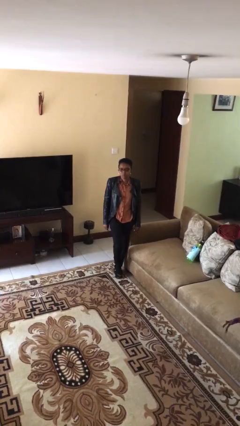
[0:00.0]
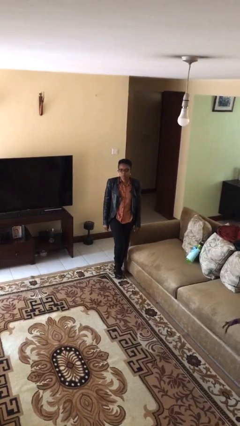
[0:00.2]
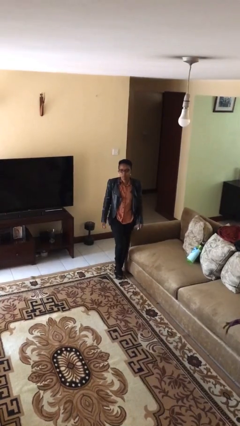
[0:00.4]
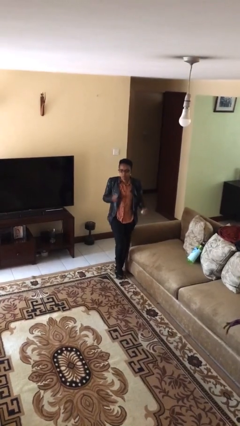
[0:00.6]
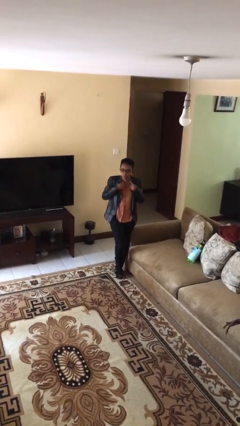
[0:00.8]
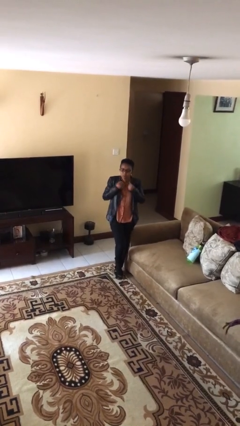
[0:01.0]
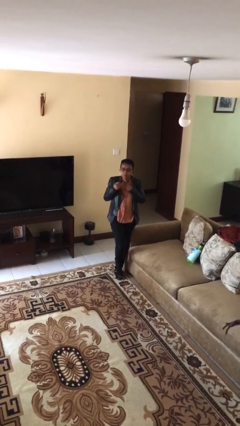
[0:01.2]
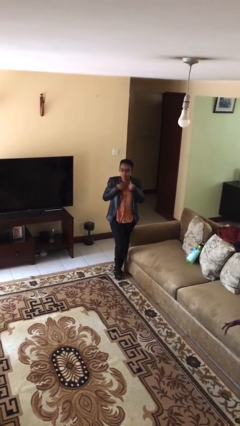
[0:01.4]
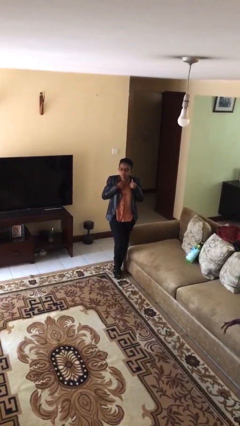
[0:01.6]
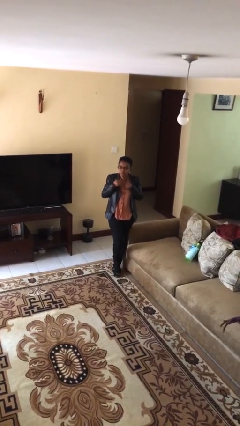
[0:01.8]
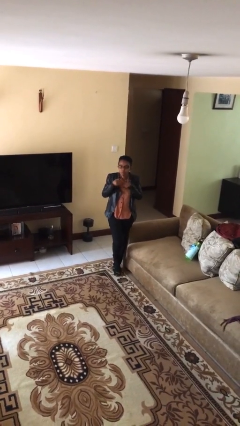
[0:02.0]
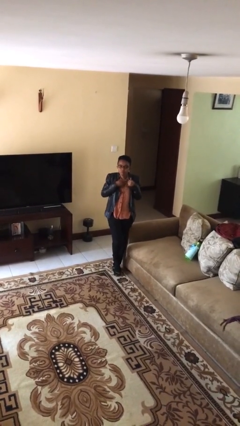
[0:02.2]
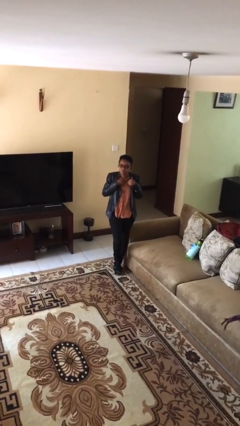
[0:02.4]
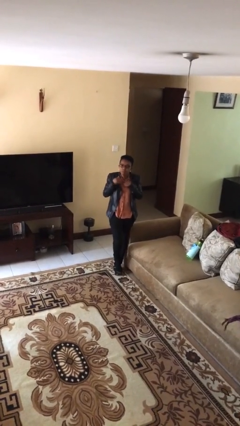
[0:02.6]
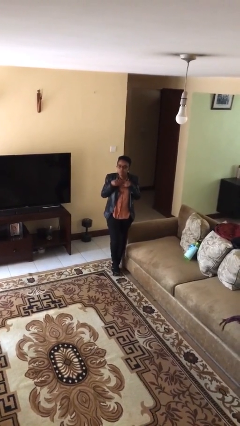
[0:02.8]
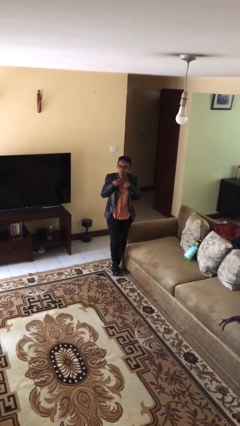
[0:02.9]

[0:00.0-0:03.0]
person drums on chest

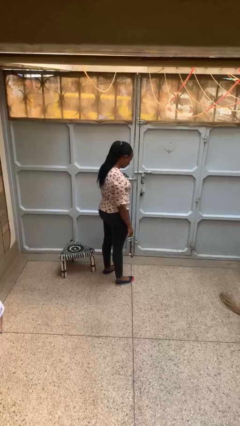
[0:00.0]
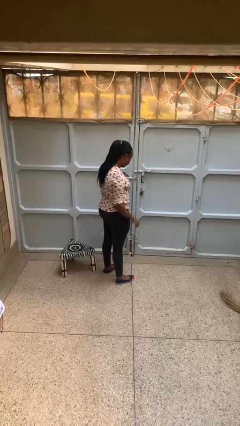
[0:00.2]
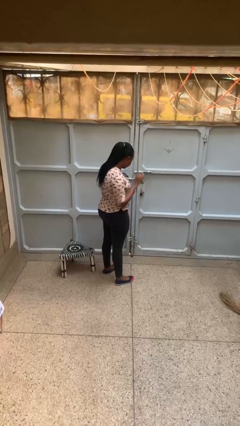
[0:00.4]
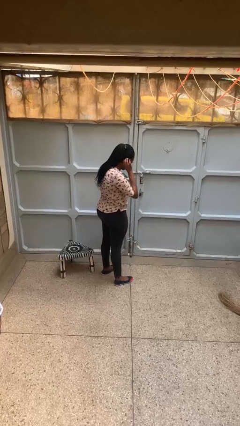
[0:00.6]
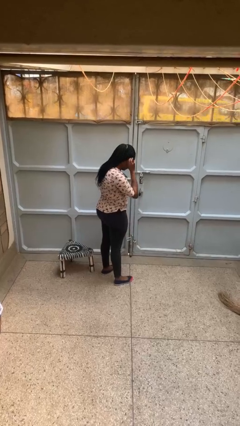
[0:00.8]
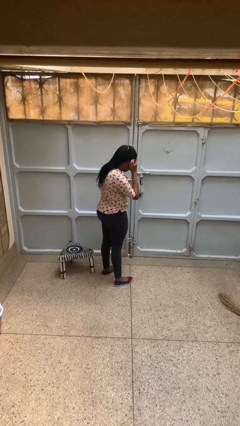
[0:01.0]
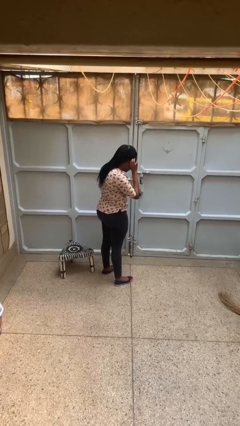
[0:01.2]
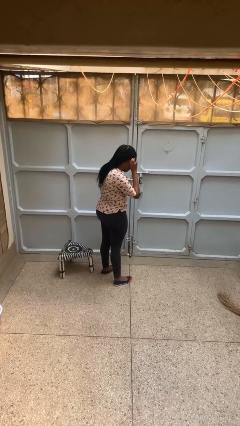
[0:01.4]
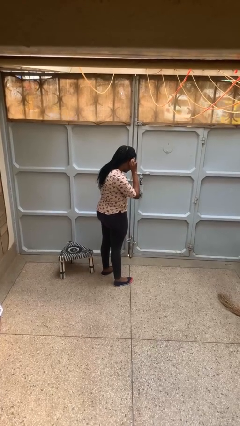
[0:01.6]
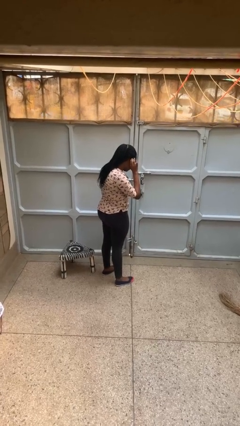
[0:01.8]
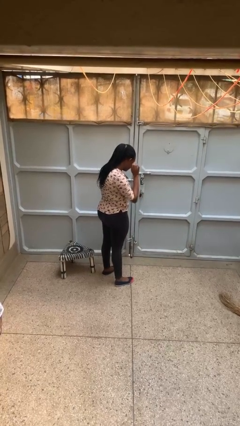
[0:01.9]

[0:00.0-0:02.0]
person gestures listen closely

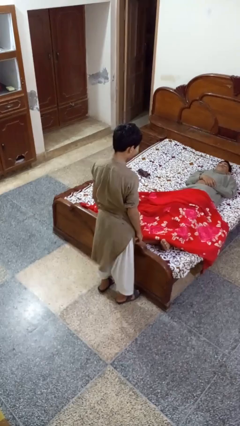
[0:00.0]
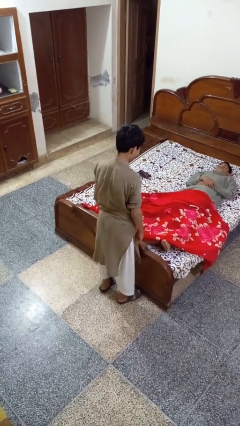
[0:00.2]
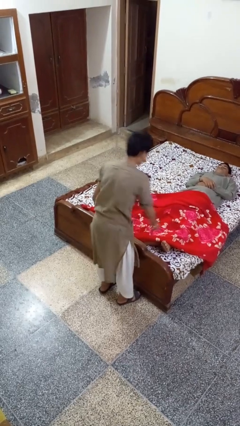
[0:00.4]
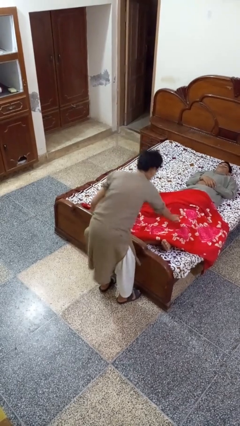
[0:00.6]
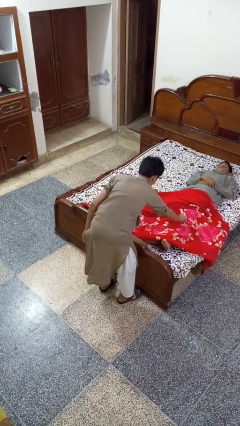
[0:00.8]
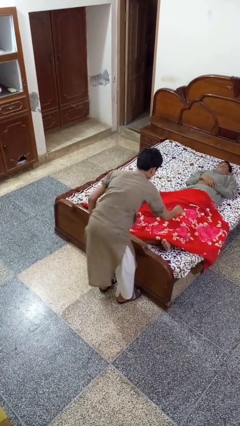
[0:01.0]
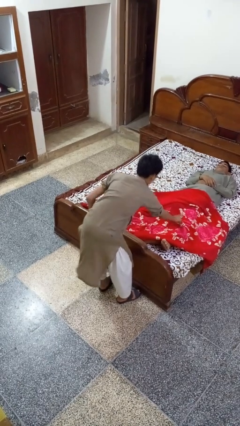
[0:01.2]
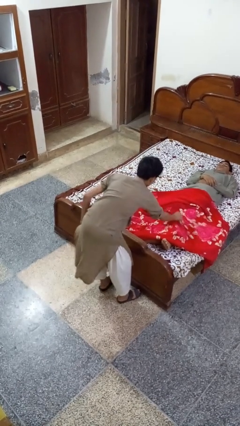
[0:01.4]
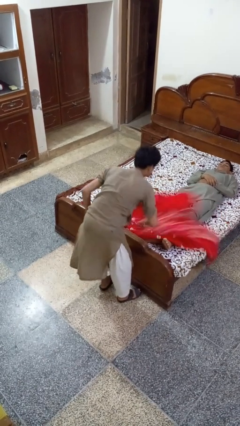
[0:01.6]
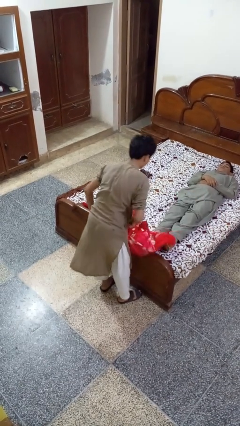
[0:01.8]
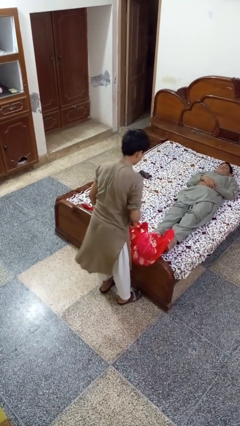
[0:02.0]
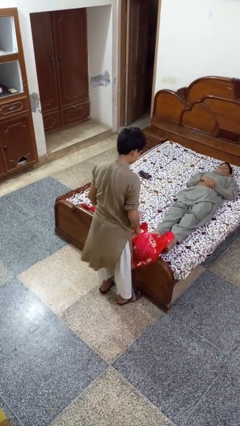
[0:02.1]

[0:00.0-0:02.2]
person uncovers friend with blanket

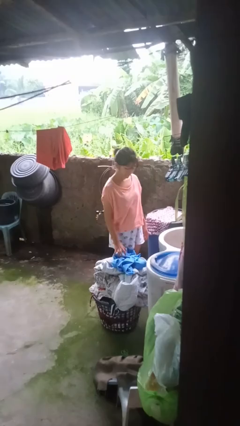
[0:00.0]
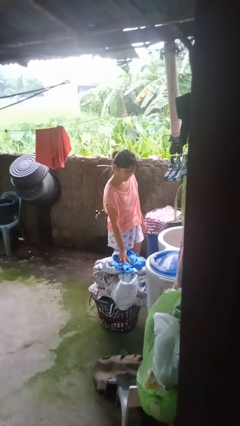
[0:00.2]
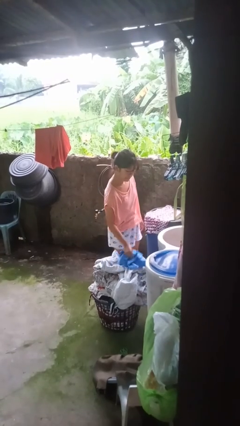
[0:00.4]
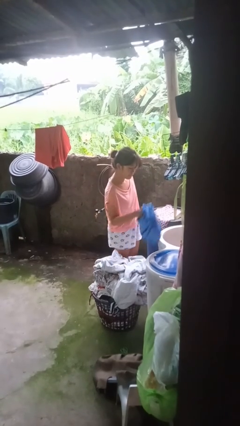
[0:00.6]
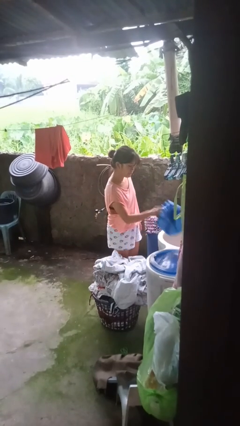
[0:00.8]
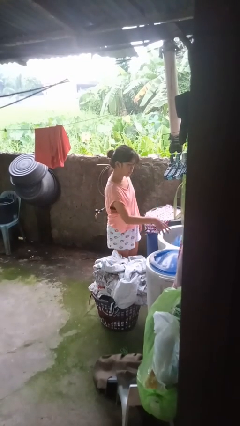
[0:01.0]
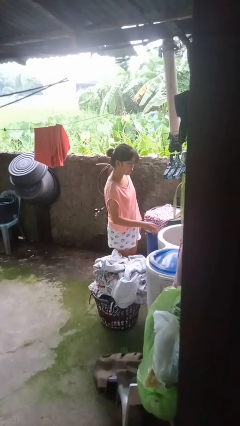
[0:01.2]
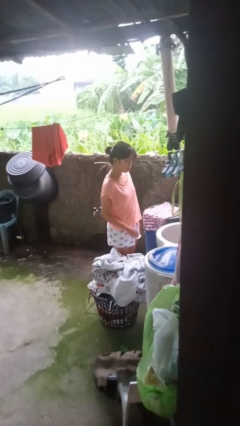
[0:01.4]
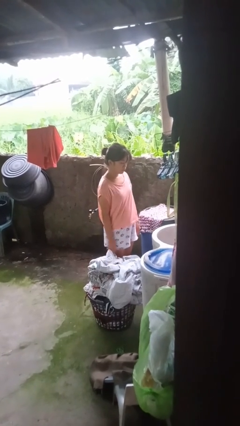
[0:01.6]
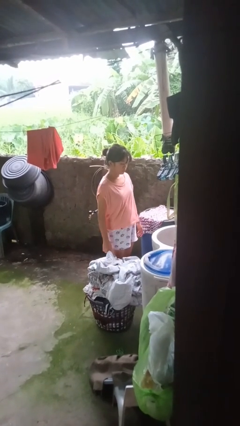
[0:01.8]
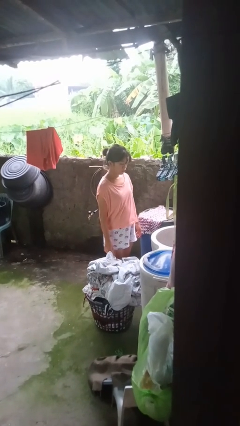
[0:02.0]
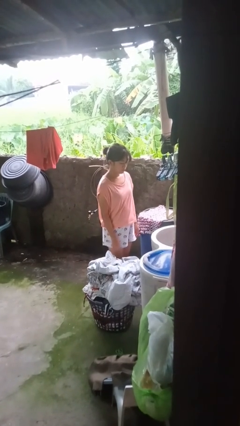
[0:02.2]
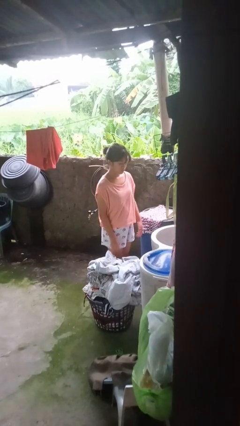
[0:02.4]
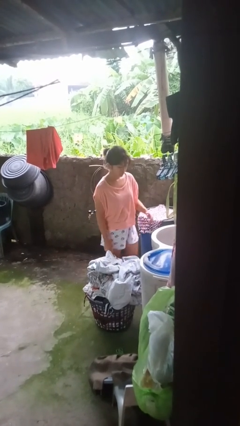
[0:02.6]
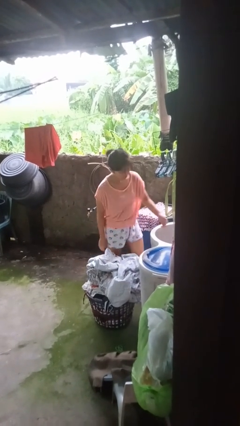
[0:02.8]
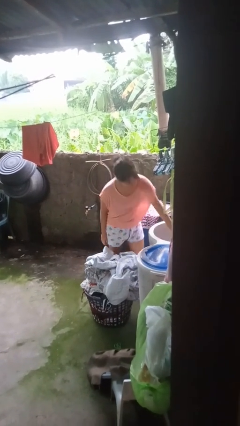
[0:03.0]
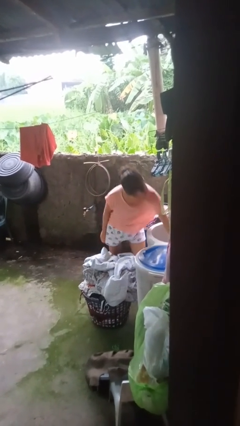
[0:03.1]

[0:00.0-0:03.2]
person loads clotheswasher

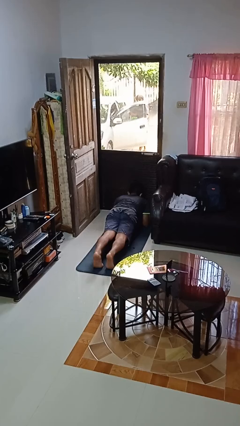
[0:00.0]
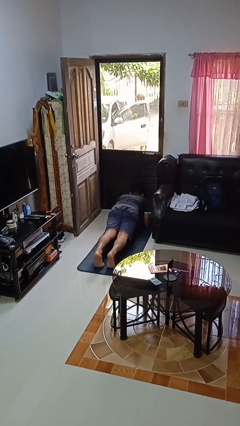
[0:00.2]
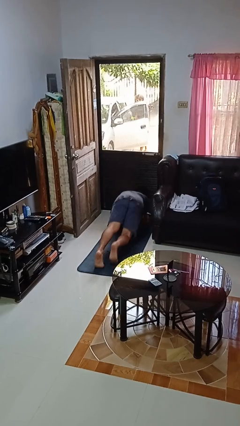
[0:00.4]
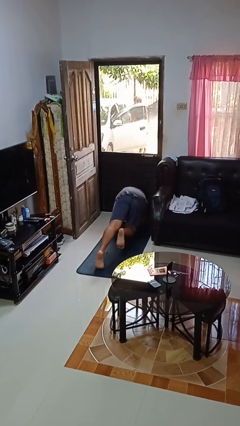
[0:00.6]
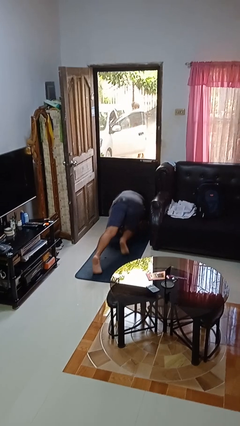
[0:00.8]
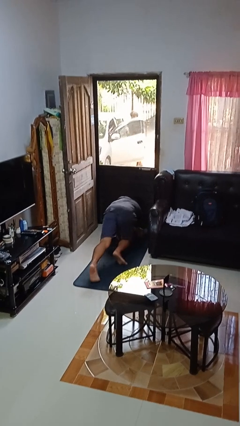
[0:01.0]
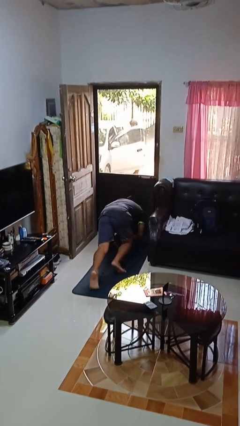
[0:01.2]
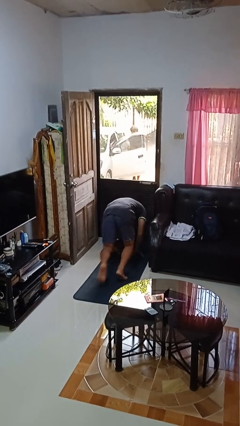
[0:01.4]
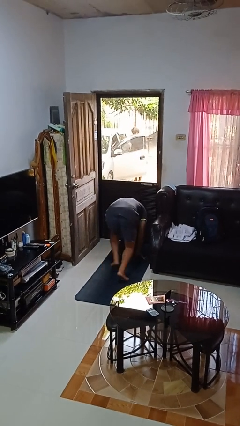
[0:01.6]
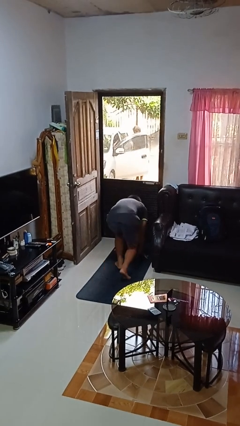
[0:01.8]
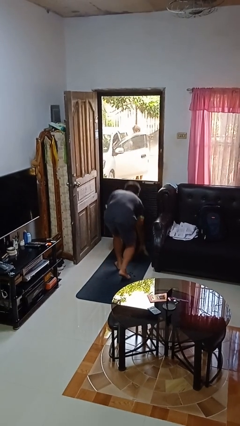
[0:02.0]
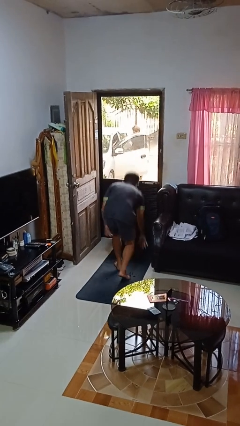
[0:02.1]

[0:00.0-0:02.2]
person stands up from floor

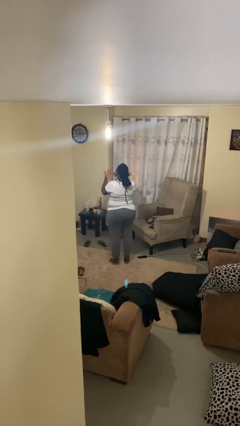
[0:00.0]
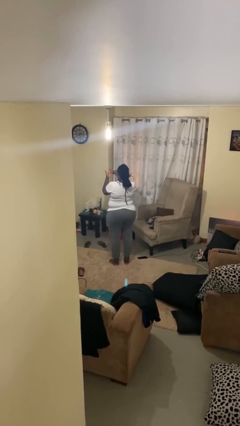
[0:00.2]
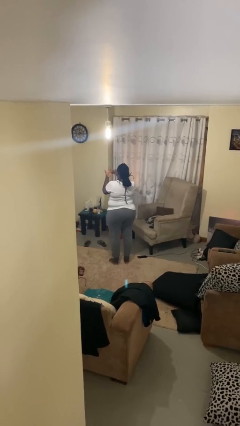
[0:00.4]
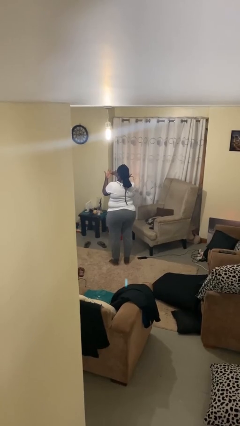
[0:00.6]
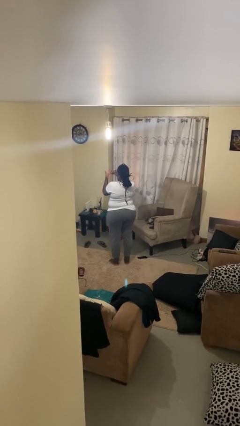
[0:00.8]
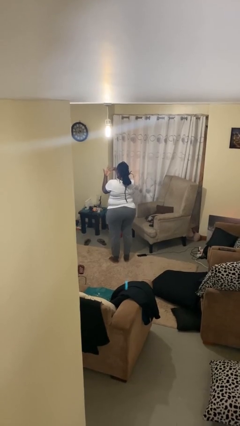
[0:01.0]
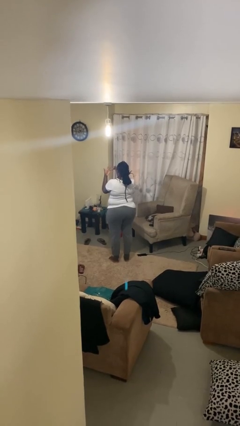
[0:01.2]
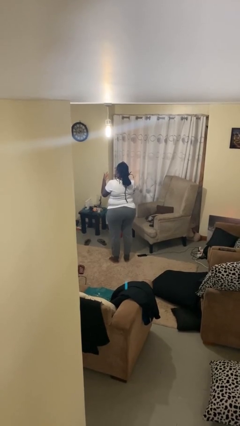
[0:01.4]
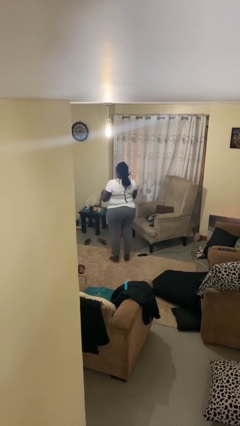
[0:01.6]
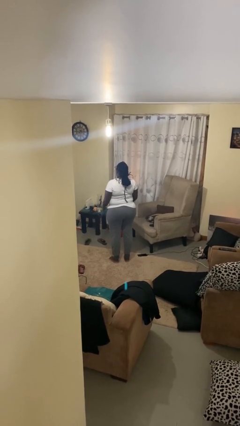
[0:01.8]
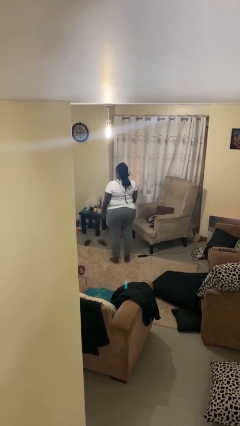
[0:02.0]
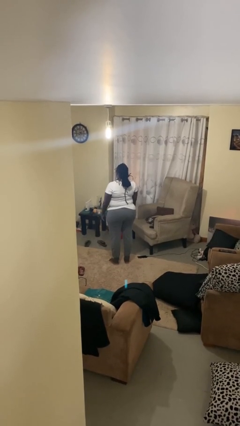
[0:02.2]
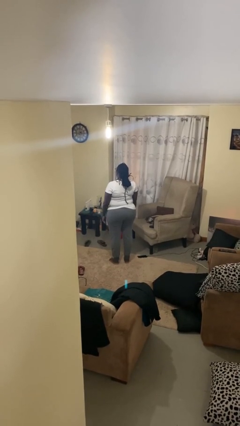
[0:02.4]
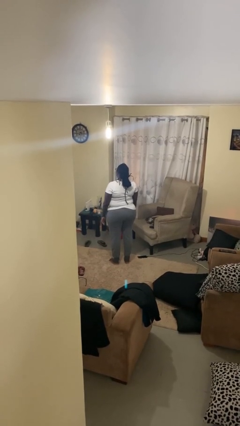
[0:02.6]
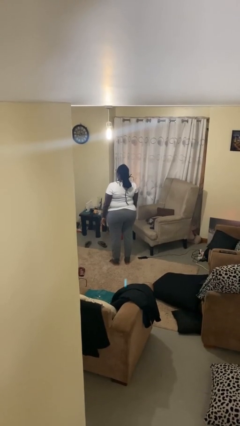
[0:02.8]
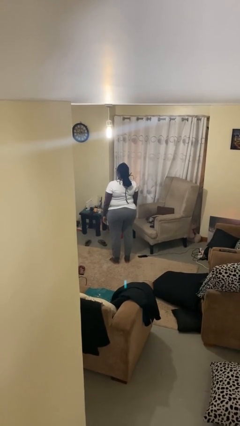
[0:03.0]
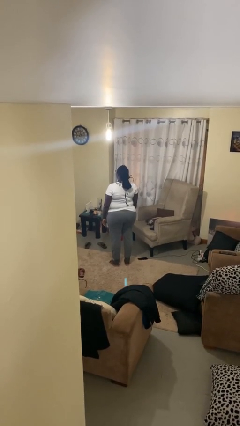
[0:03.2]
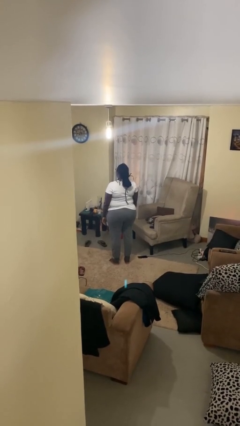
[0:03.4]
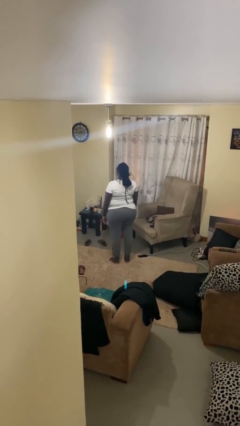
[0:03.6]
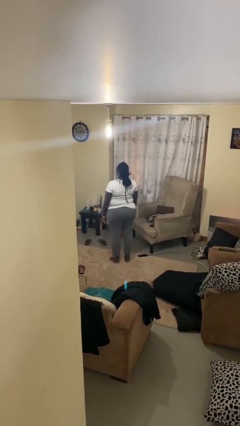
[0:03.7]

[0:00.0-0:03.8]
person takes off ring

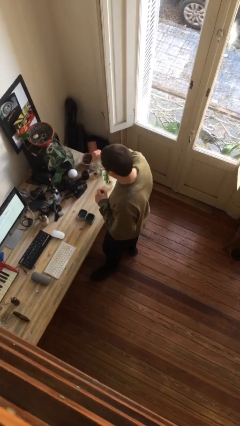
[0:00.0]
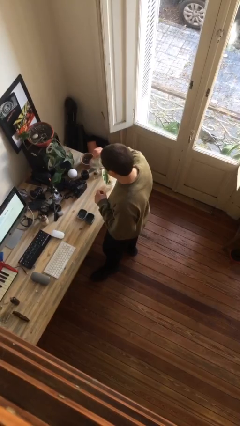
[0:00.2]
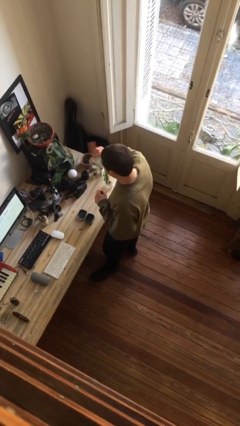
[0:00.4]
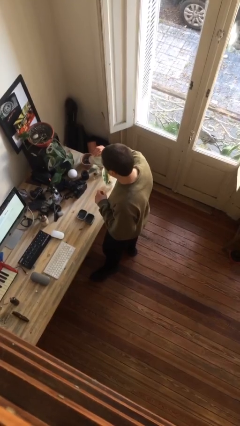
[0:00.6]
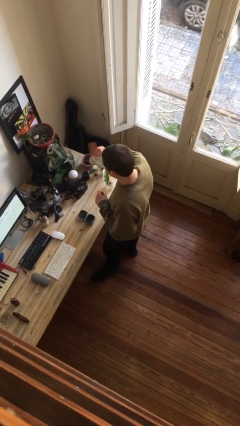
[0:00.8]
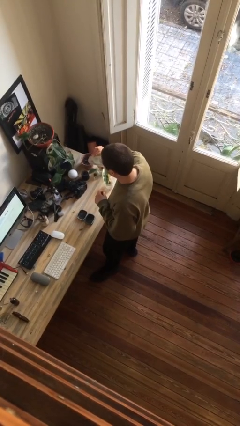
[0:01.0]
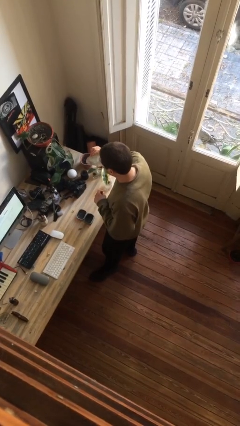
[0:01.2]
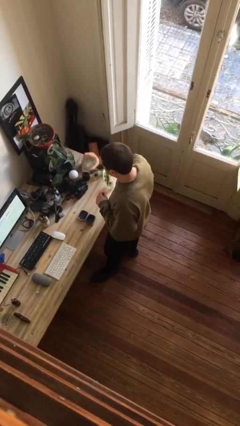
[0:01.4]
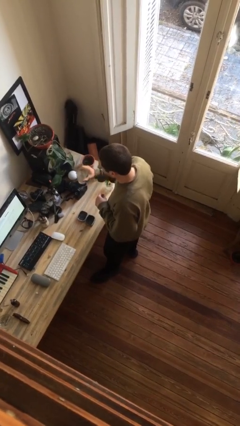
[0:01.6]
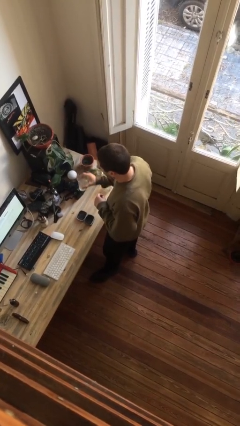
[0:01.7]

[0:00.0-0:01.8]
person drinks from cup
